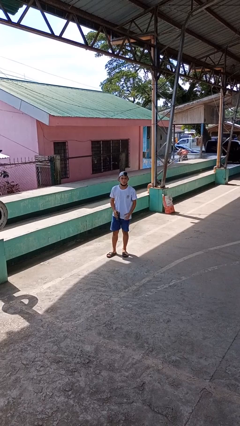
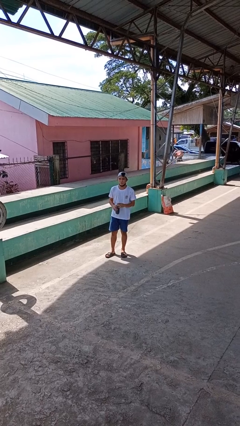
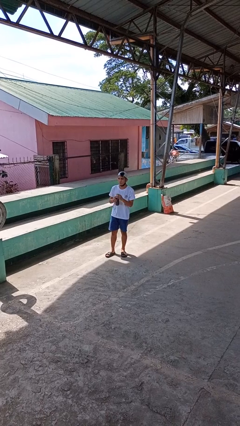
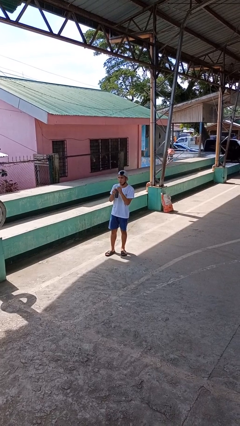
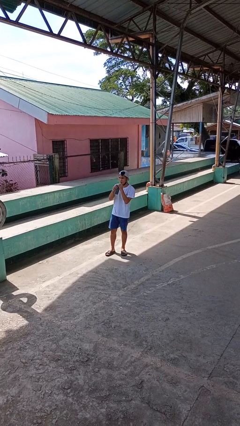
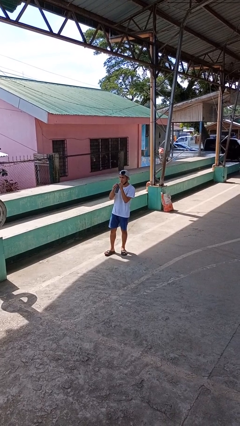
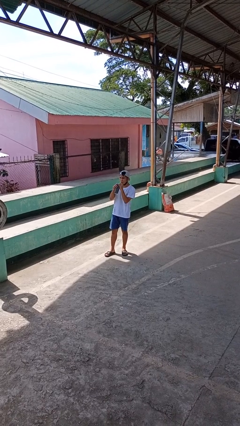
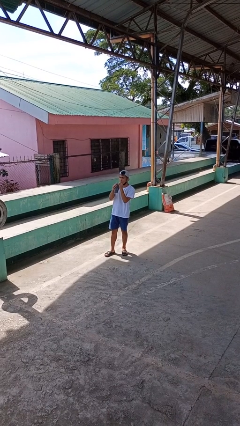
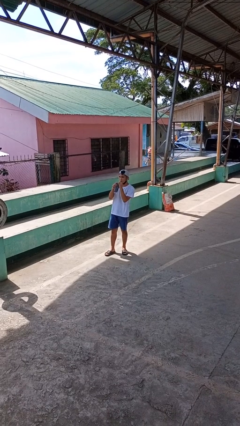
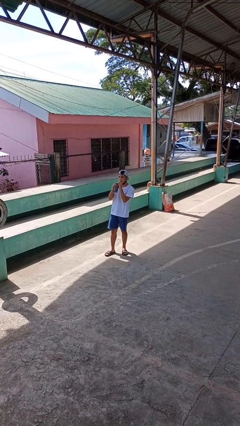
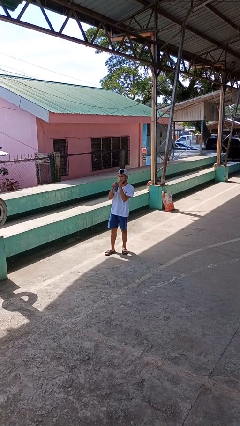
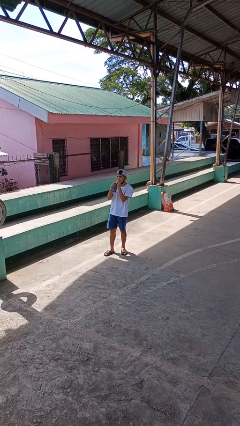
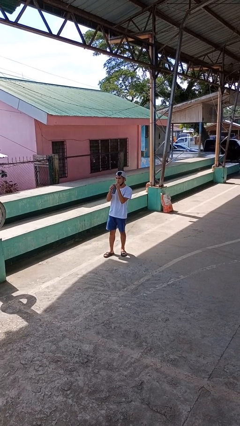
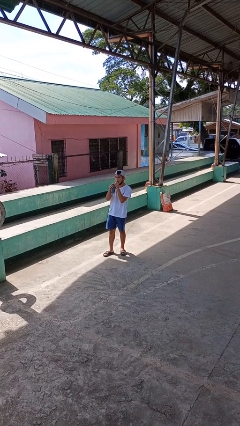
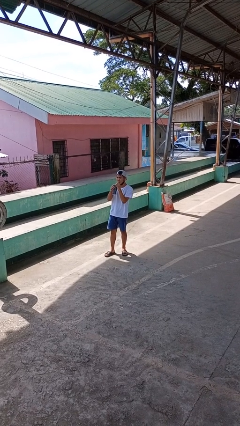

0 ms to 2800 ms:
person drinks from straw

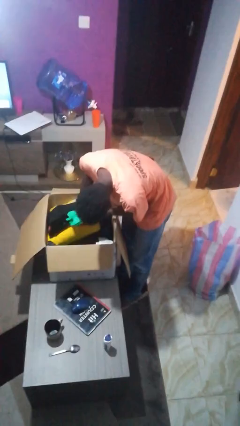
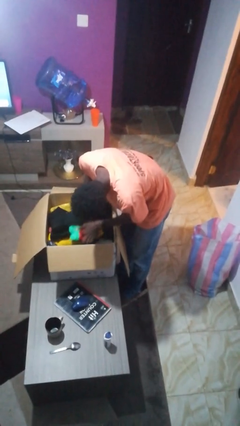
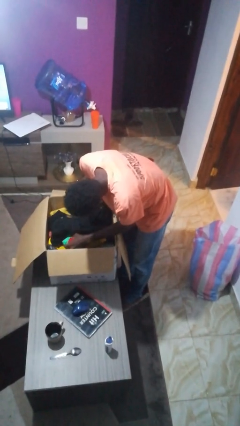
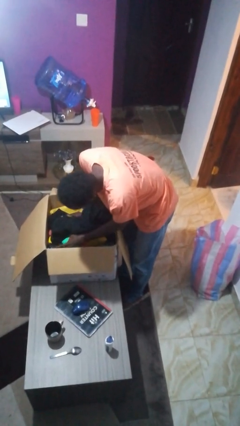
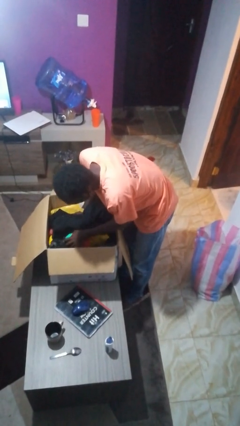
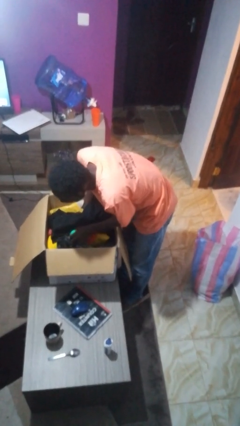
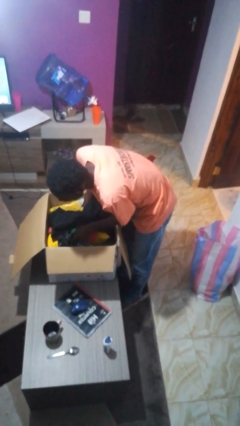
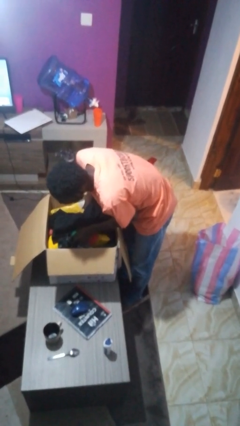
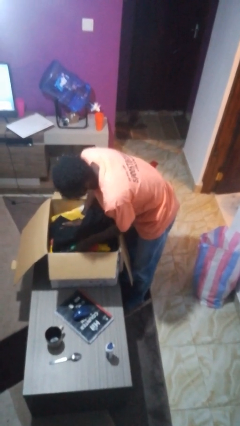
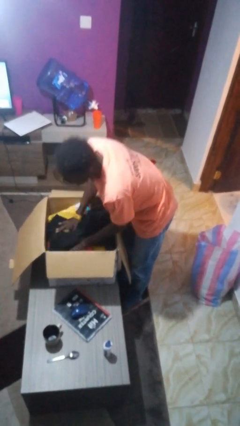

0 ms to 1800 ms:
person searches in box

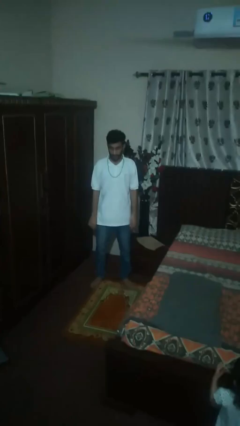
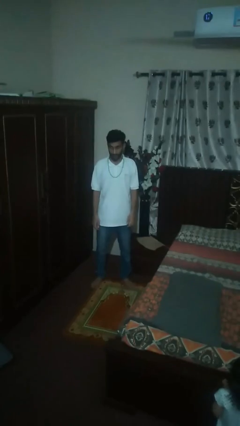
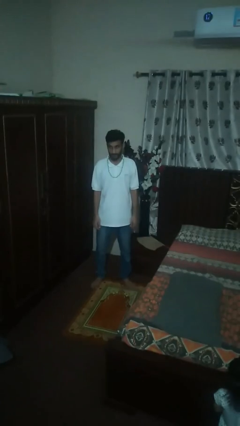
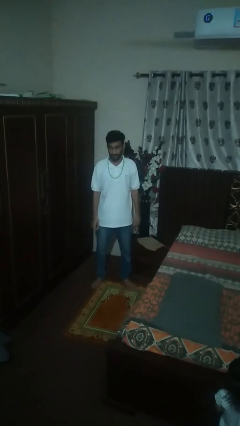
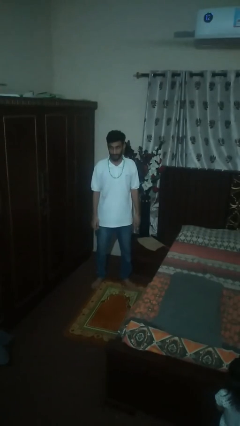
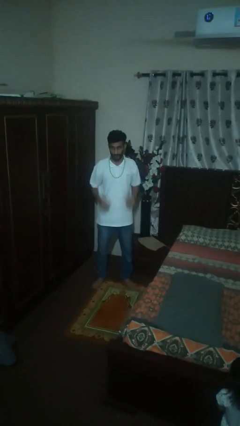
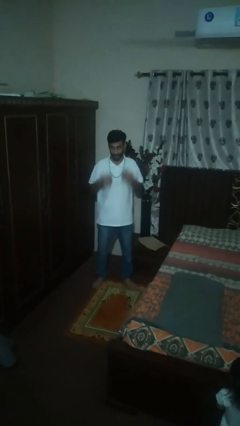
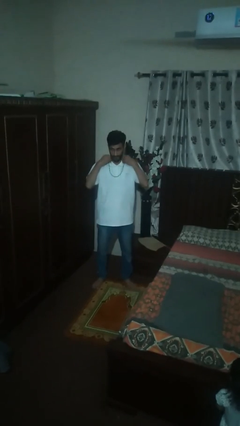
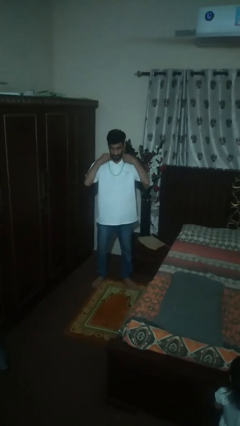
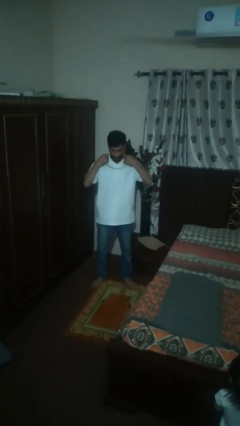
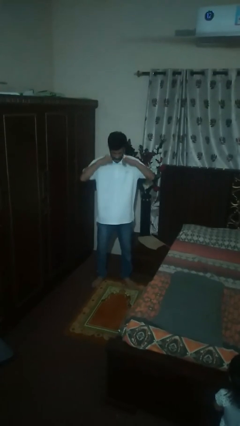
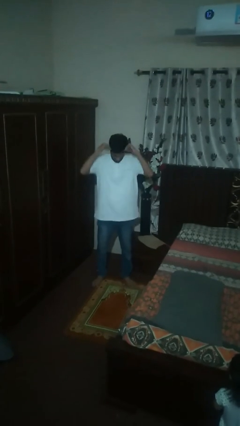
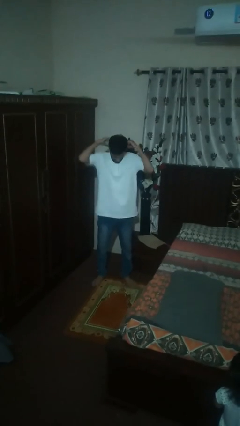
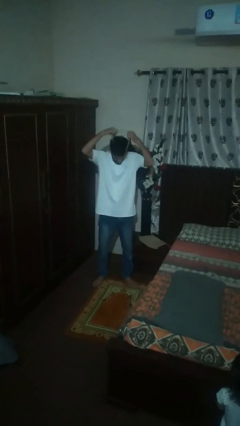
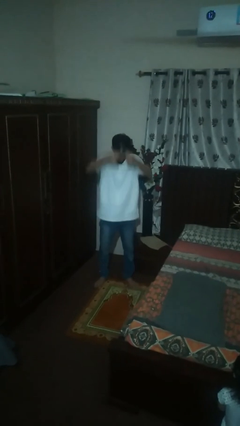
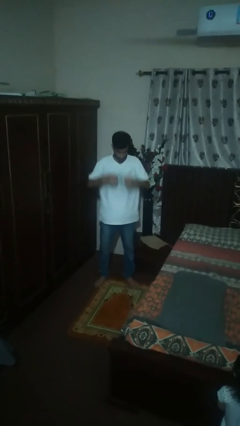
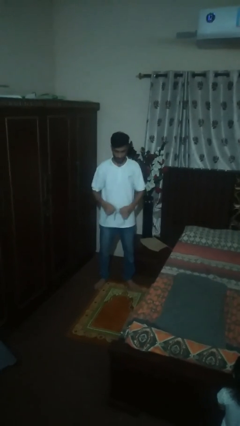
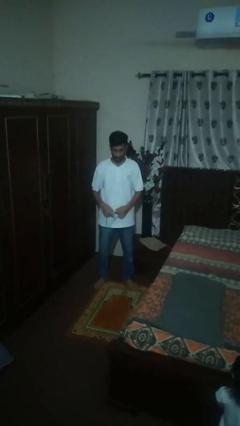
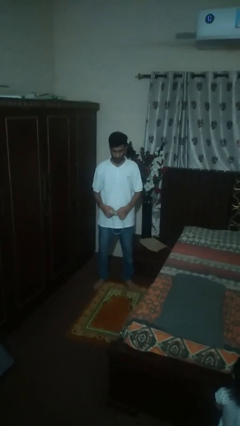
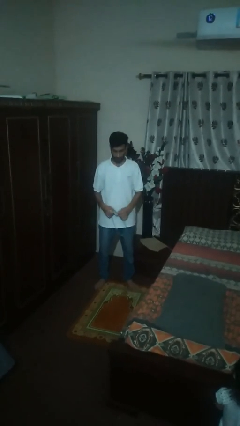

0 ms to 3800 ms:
person takes off necklace

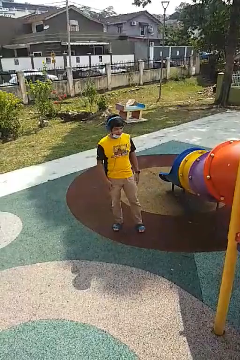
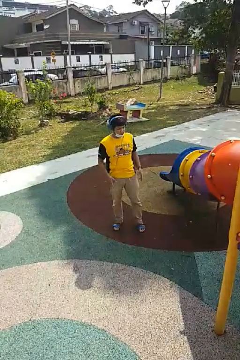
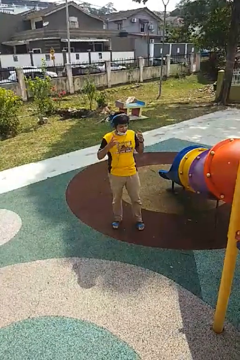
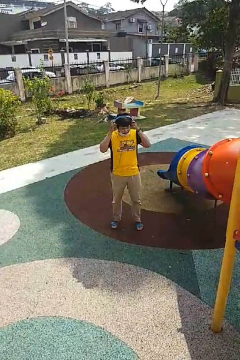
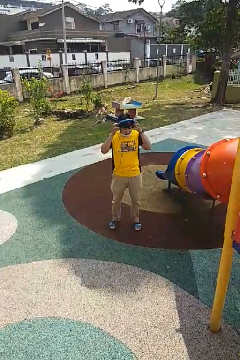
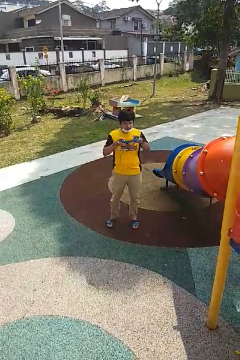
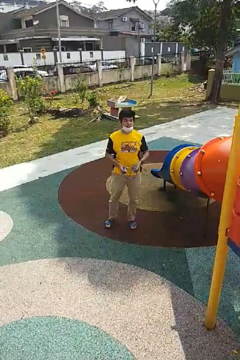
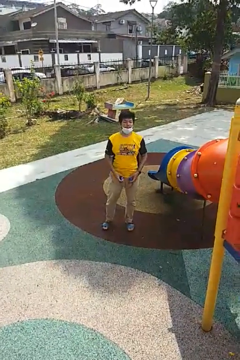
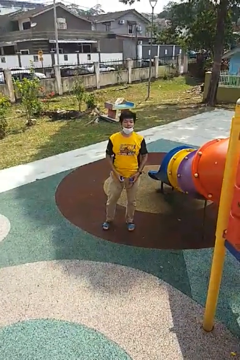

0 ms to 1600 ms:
person takes off headphones

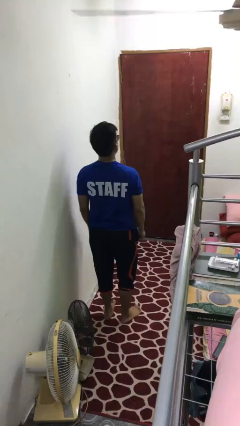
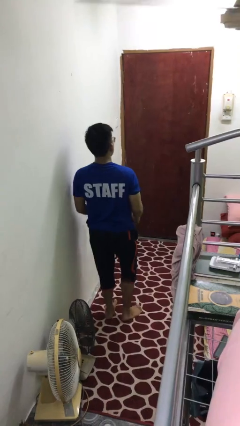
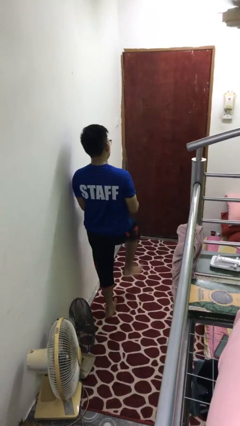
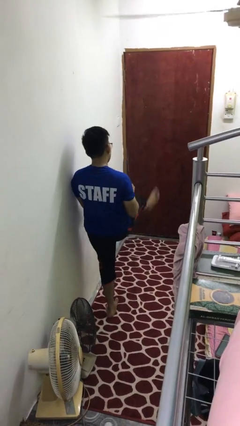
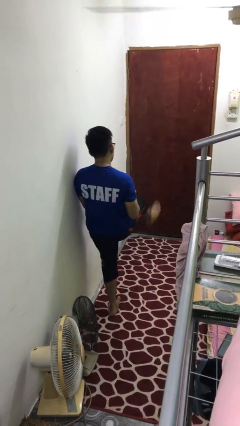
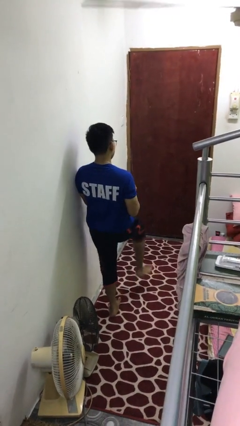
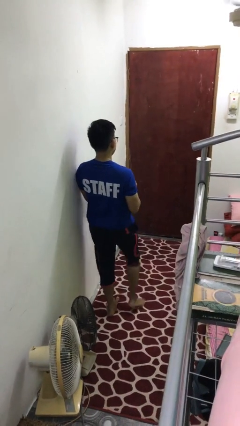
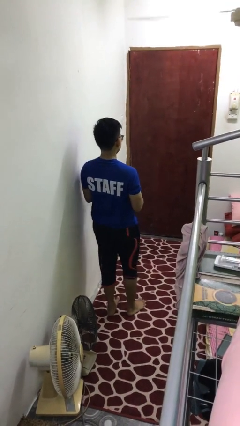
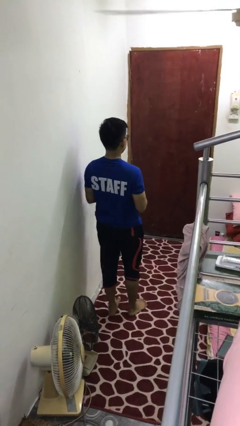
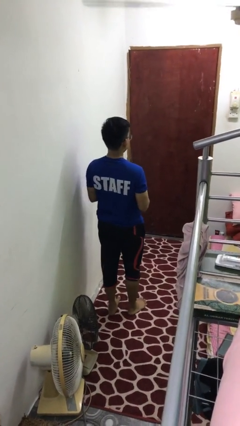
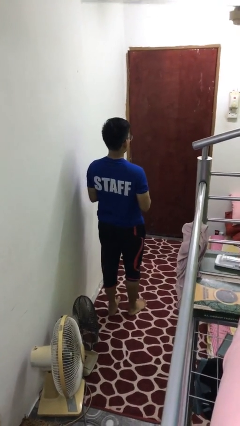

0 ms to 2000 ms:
person karate kicks

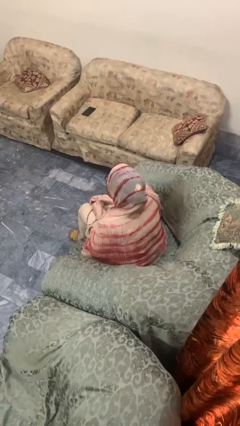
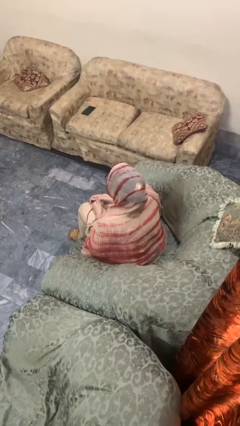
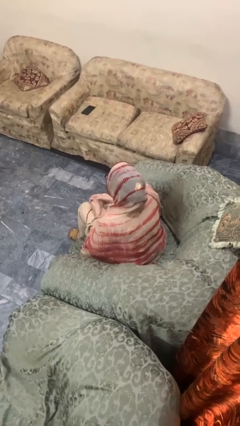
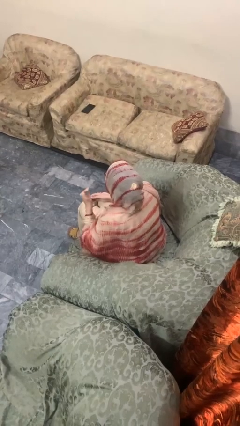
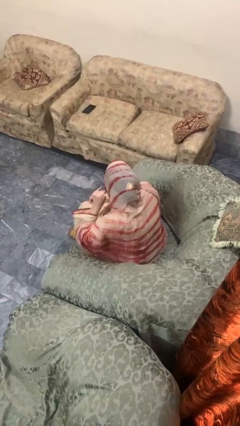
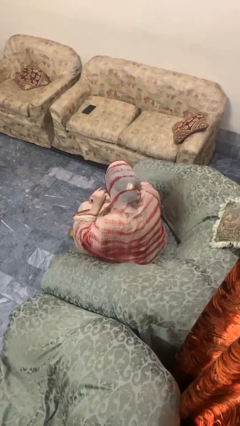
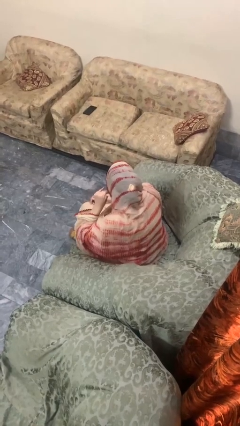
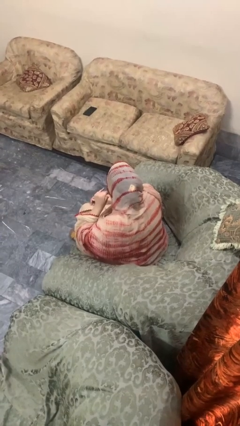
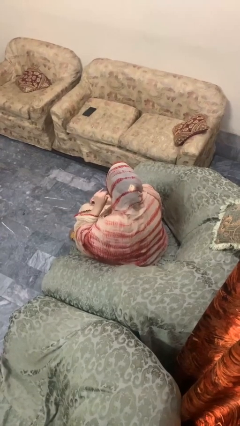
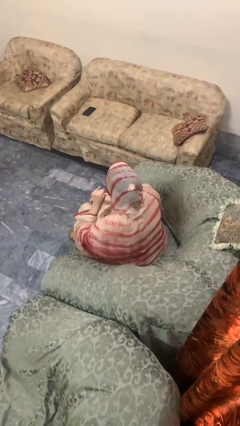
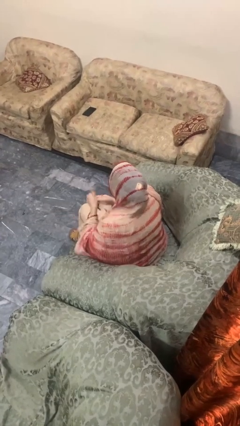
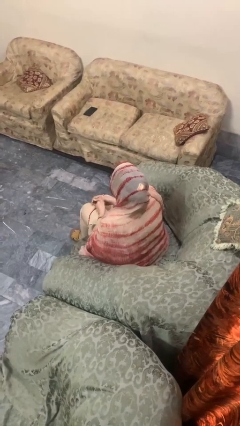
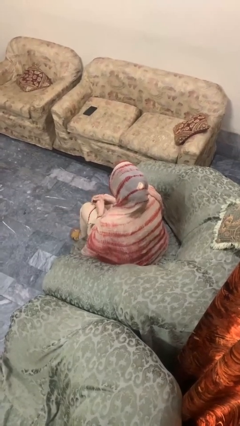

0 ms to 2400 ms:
person gestures call me

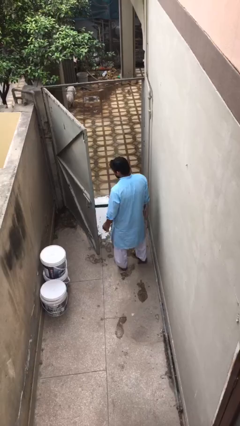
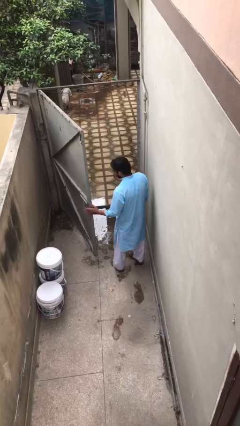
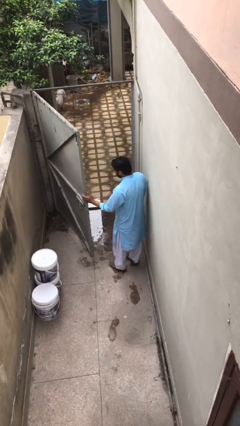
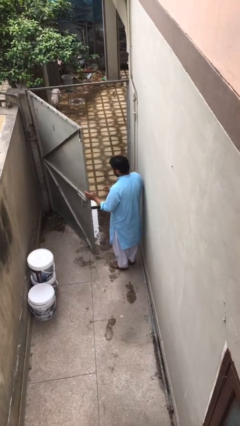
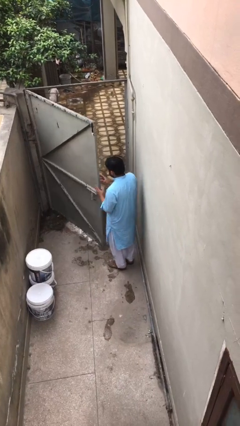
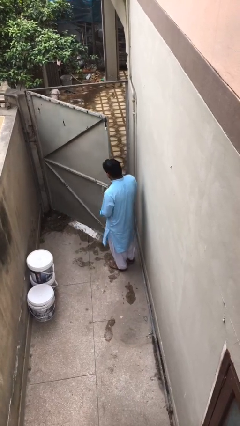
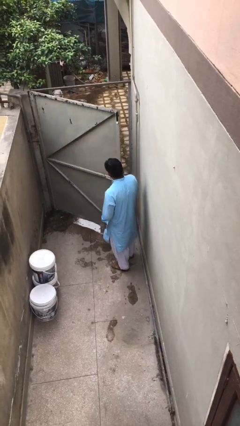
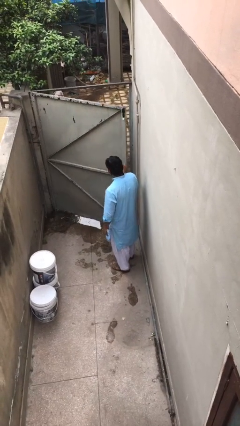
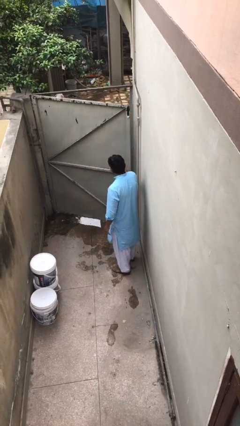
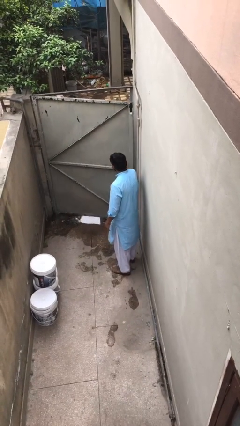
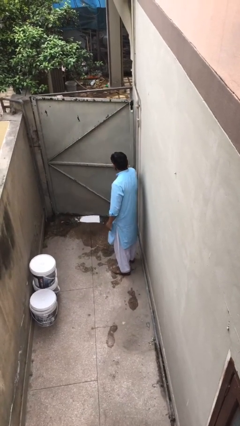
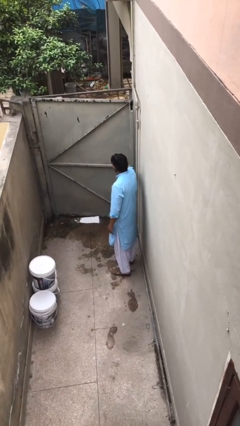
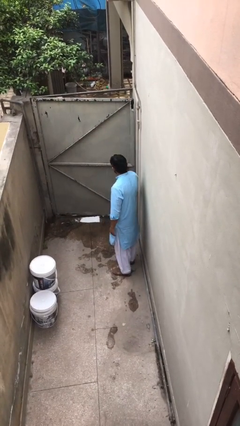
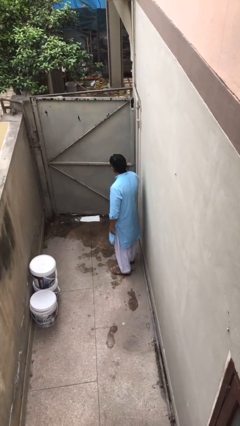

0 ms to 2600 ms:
person closes facility door
